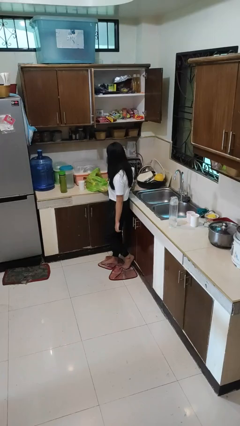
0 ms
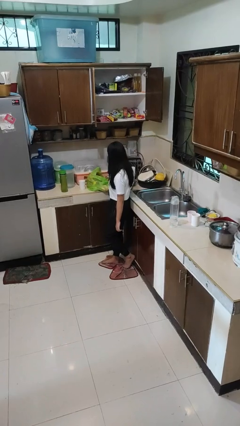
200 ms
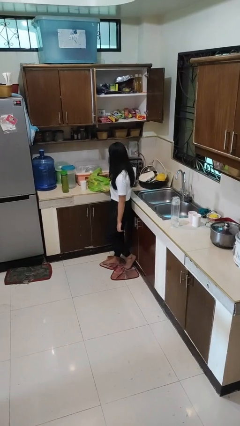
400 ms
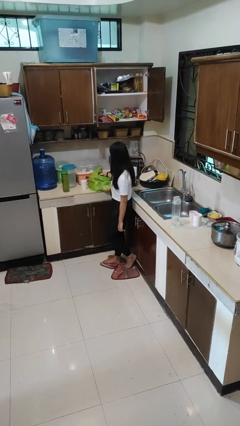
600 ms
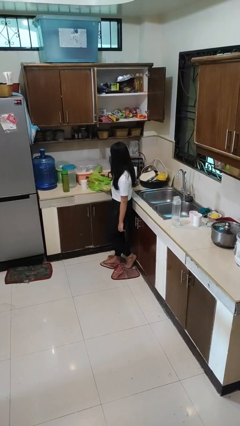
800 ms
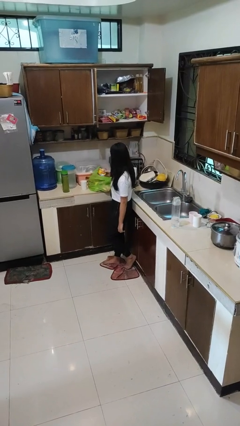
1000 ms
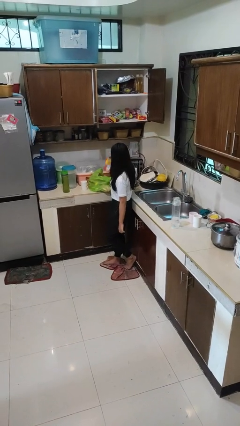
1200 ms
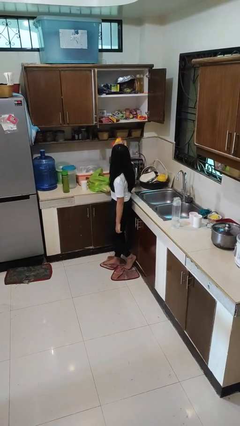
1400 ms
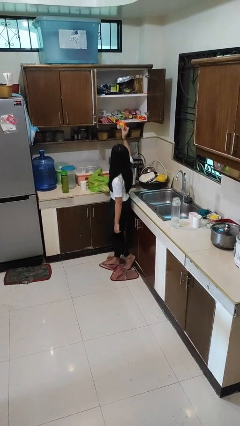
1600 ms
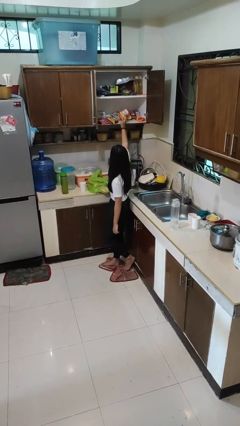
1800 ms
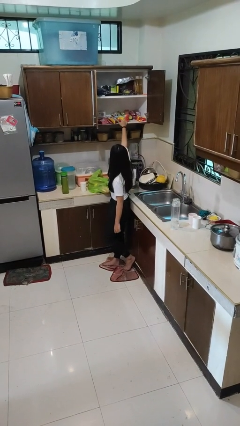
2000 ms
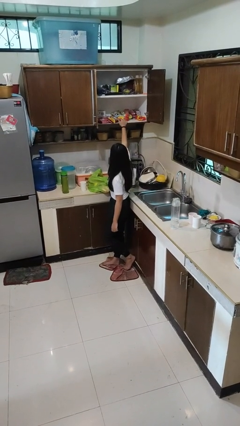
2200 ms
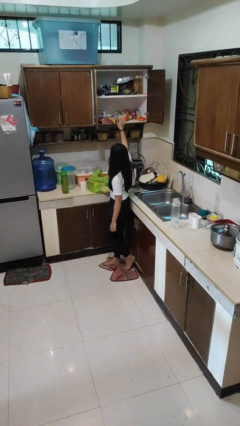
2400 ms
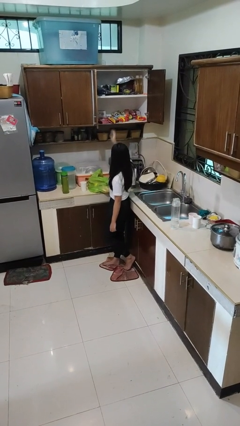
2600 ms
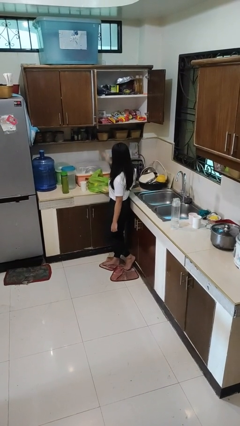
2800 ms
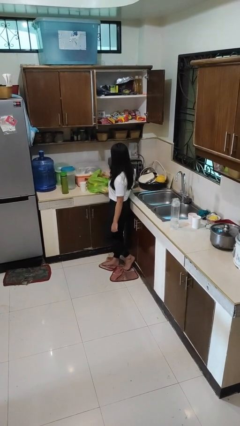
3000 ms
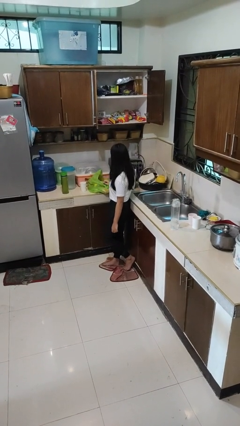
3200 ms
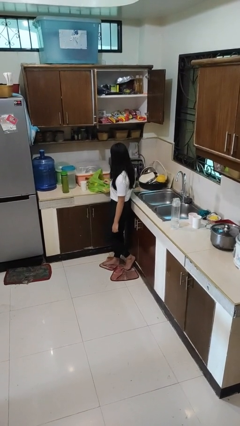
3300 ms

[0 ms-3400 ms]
person loads groceries into cabinet

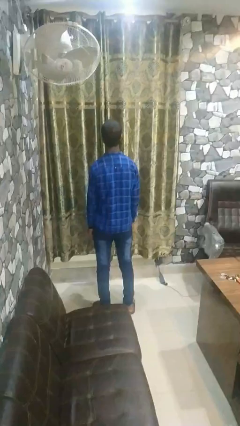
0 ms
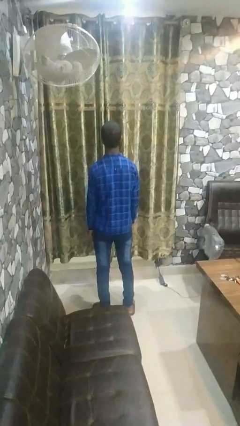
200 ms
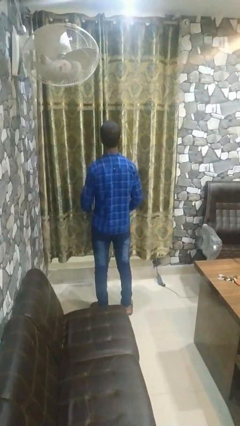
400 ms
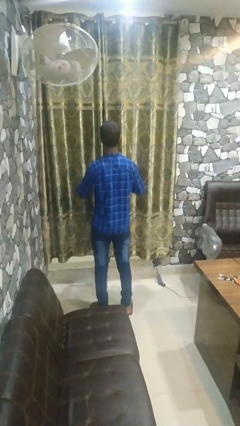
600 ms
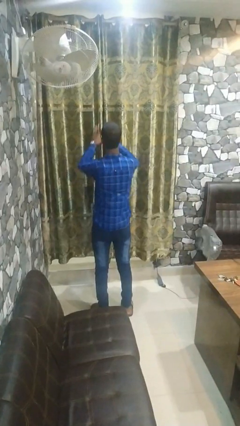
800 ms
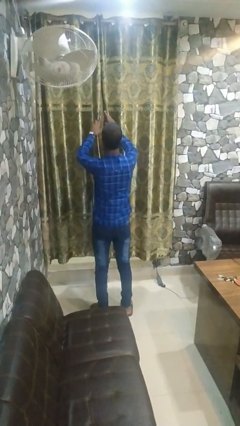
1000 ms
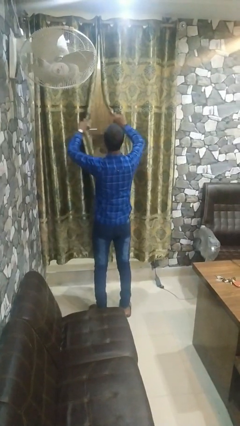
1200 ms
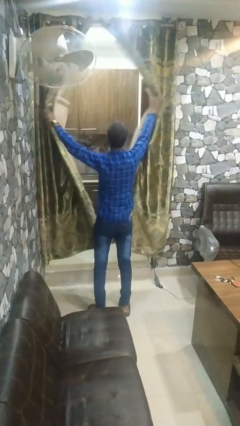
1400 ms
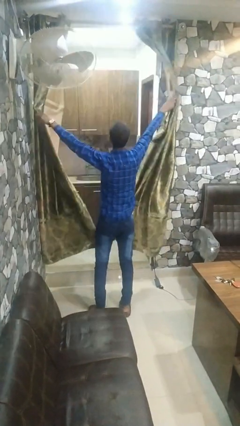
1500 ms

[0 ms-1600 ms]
person opens curtains

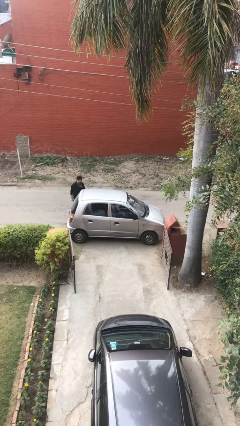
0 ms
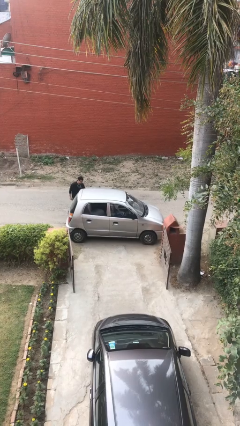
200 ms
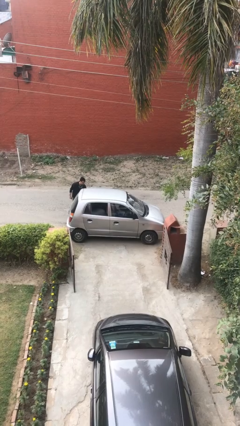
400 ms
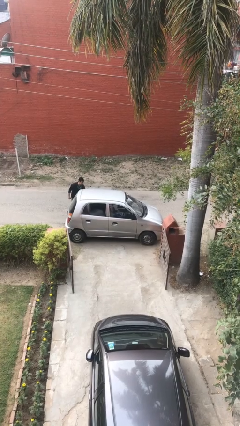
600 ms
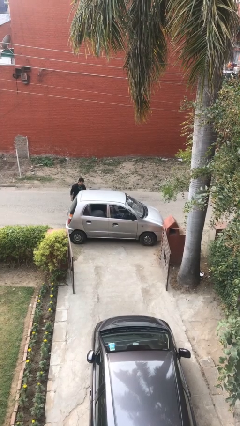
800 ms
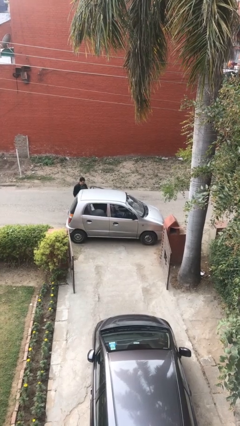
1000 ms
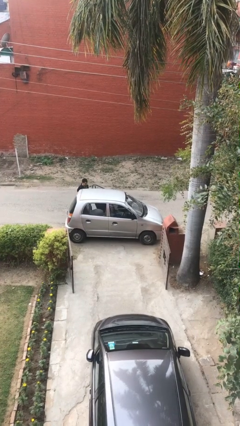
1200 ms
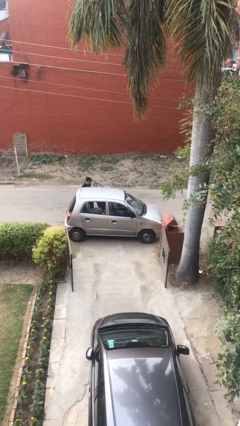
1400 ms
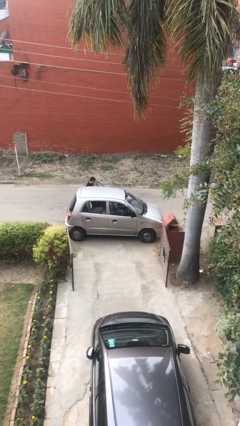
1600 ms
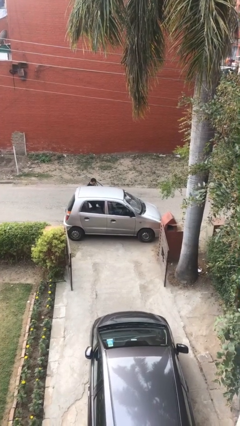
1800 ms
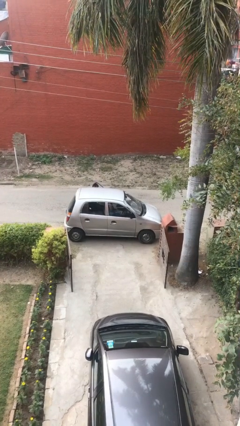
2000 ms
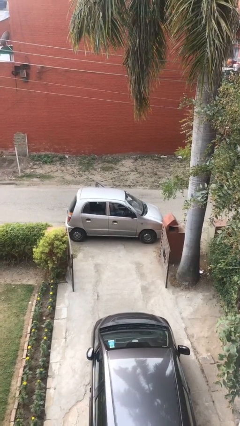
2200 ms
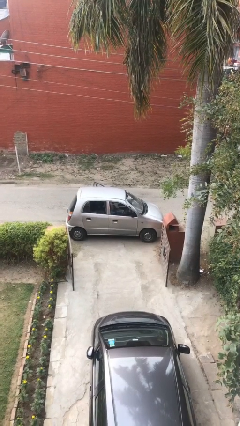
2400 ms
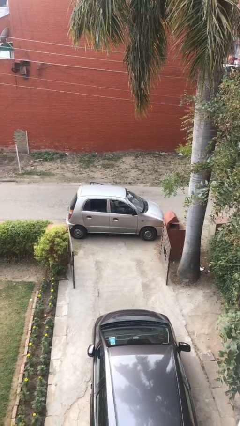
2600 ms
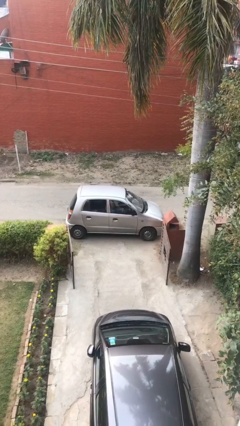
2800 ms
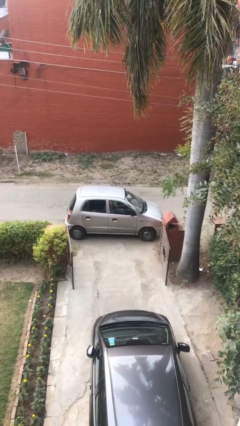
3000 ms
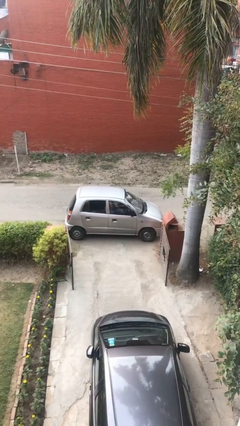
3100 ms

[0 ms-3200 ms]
car picks up person

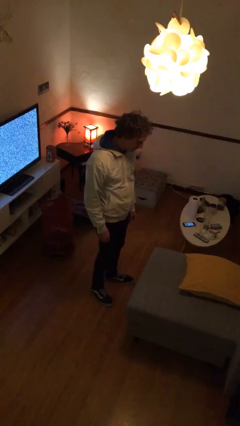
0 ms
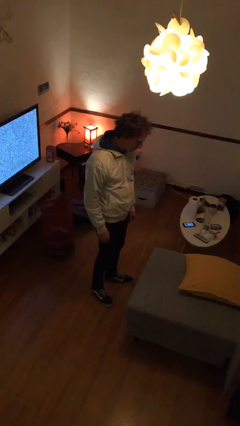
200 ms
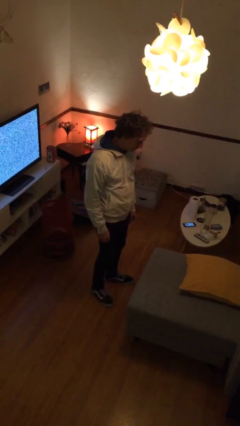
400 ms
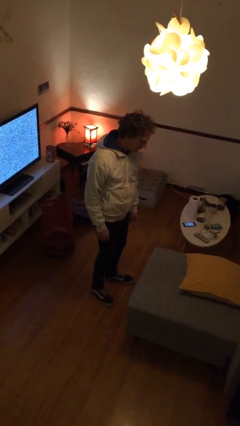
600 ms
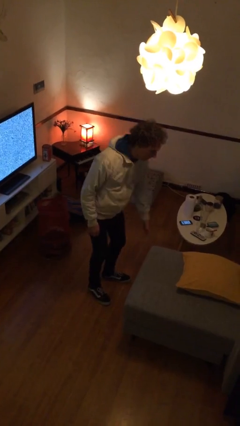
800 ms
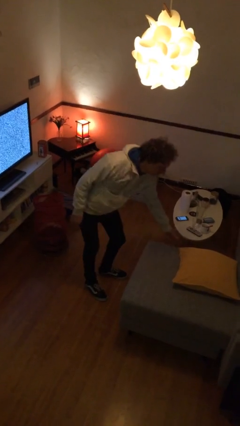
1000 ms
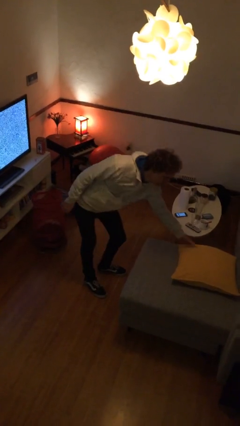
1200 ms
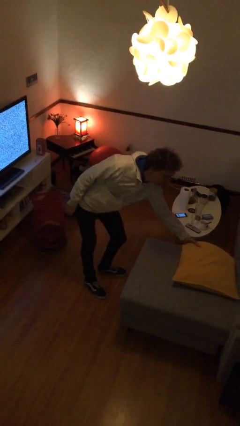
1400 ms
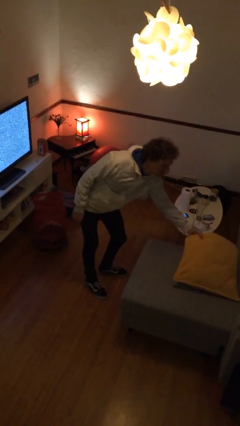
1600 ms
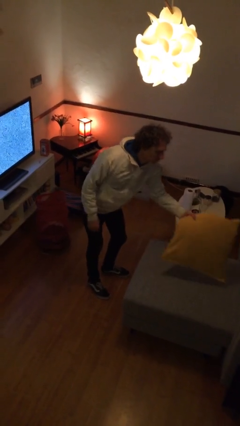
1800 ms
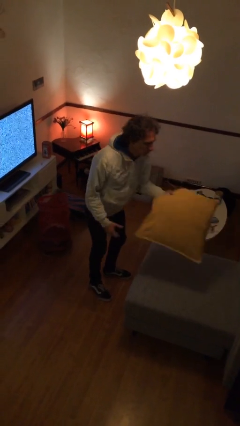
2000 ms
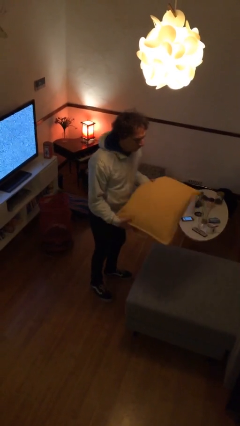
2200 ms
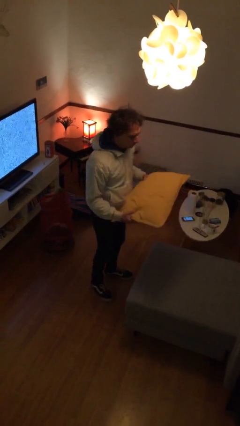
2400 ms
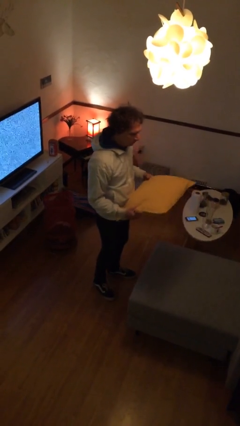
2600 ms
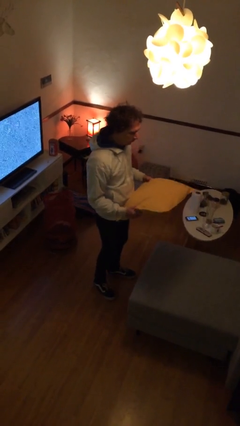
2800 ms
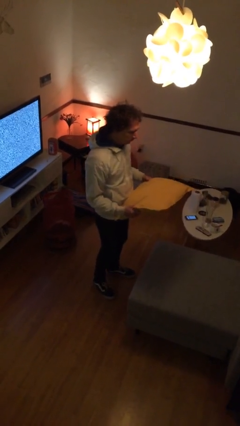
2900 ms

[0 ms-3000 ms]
person picks up object from couch

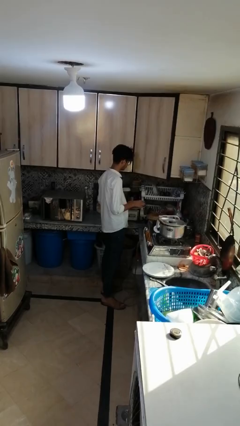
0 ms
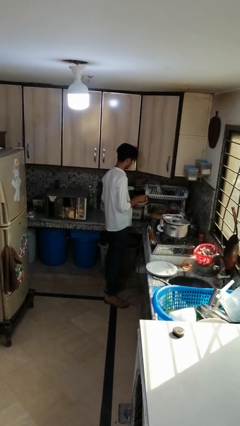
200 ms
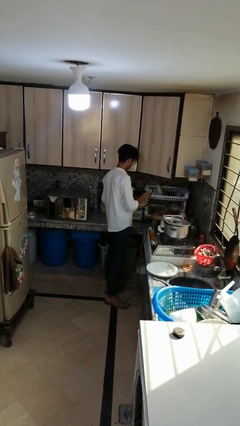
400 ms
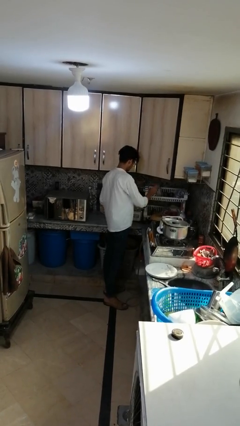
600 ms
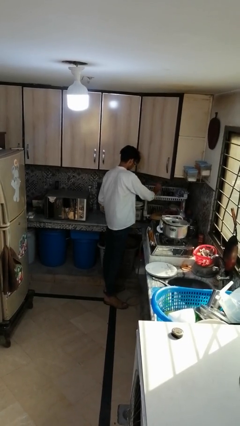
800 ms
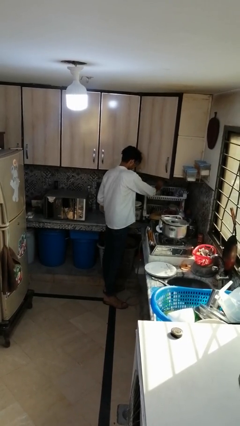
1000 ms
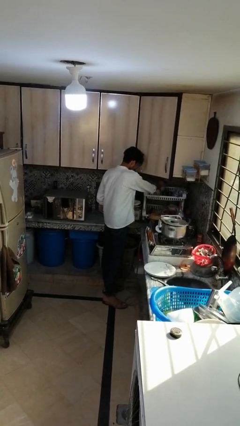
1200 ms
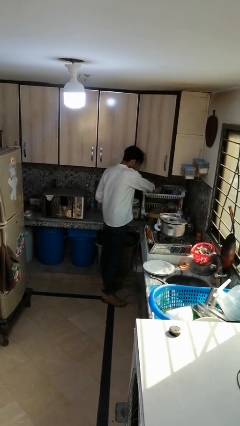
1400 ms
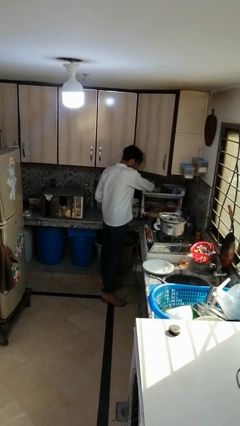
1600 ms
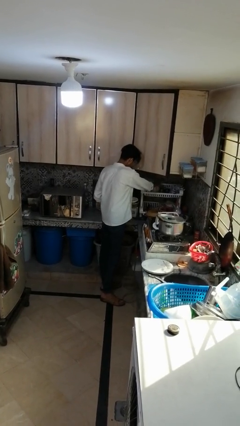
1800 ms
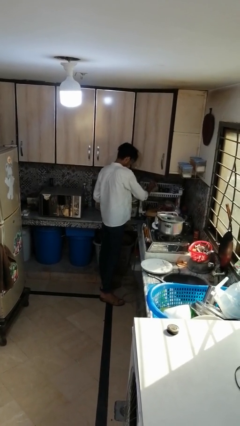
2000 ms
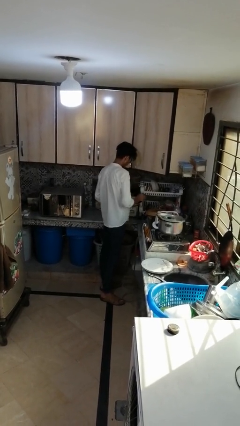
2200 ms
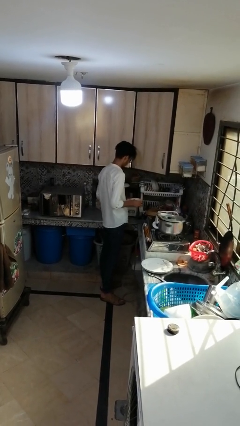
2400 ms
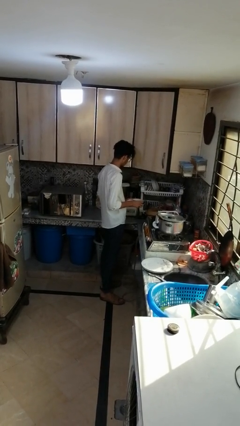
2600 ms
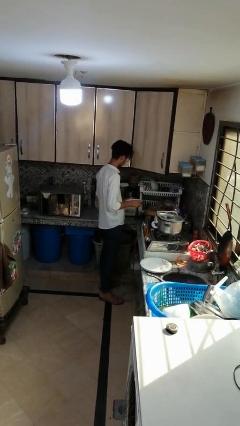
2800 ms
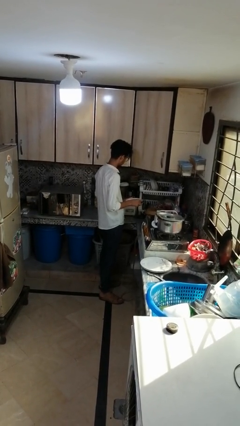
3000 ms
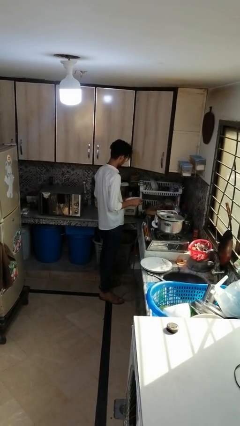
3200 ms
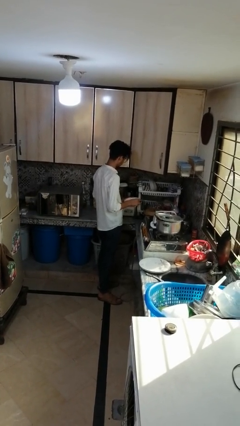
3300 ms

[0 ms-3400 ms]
person loads dishwasher

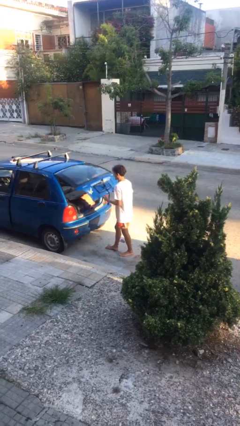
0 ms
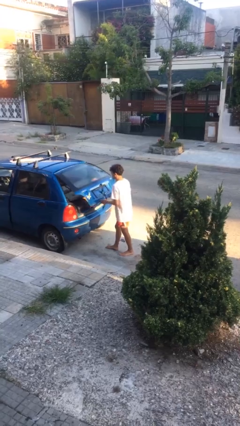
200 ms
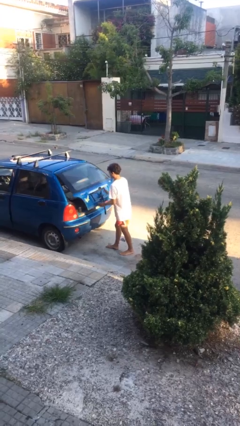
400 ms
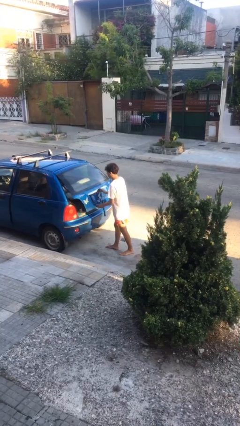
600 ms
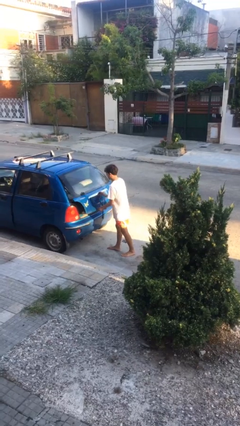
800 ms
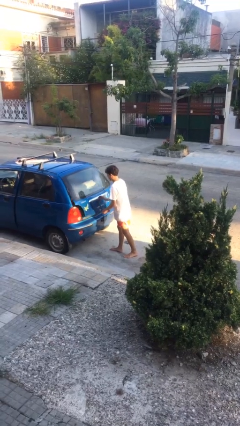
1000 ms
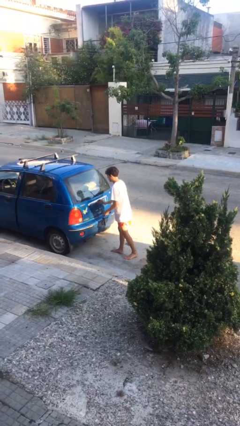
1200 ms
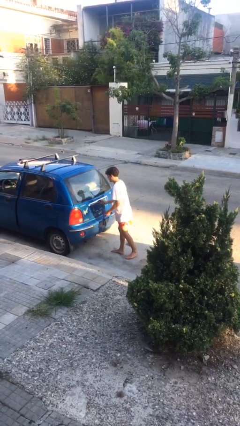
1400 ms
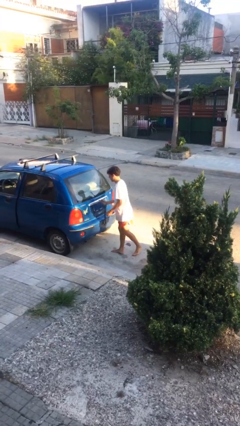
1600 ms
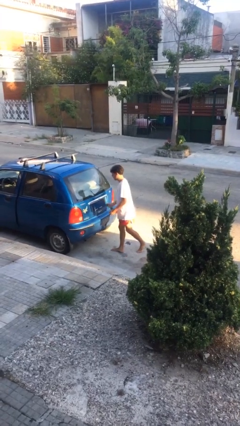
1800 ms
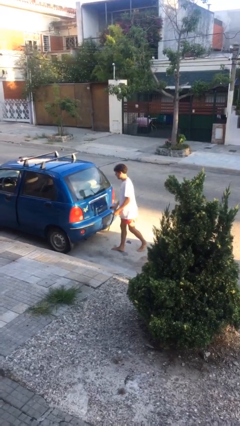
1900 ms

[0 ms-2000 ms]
person closes car trunk

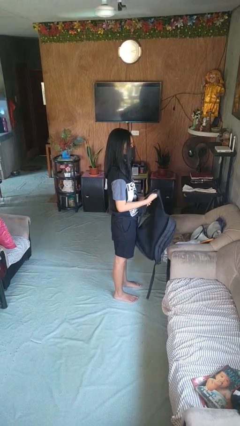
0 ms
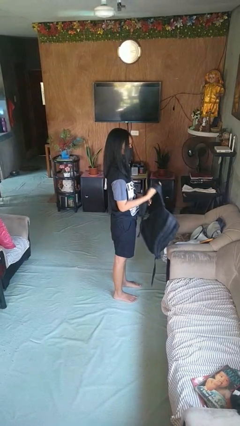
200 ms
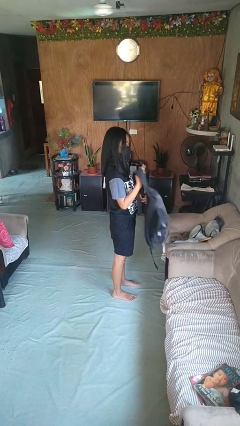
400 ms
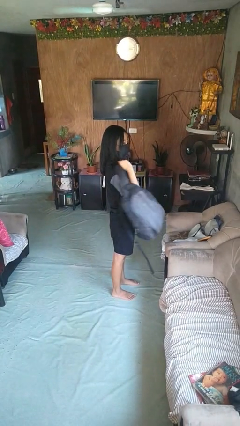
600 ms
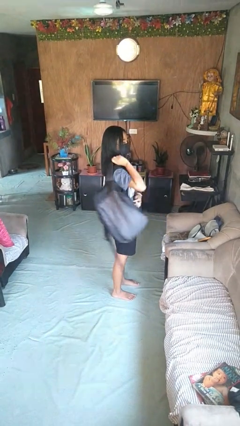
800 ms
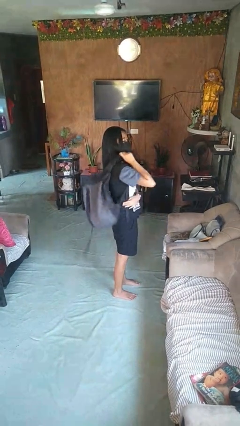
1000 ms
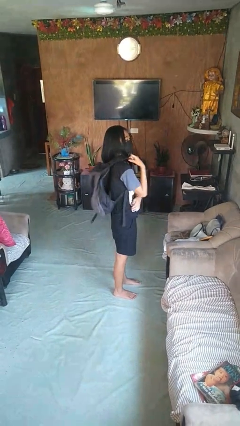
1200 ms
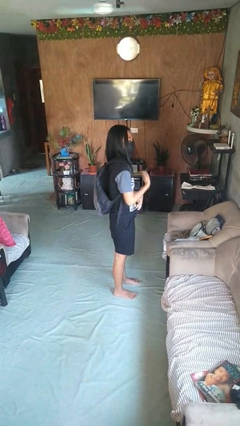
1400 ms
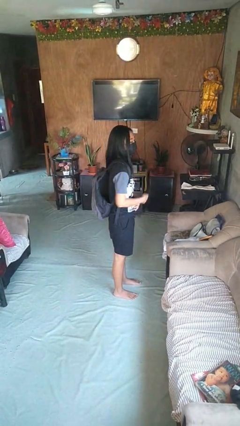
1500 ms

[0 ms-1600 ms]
person puts on backpack
